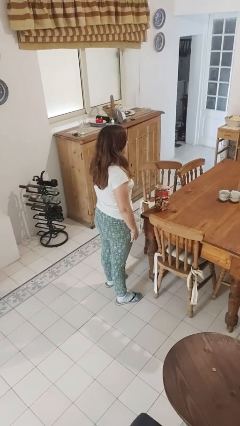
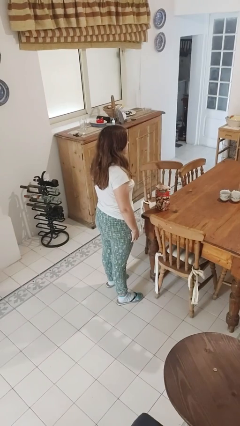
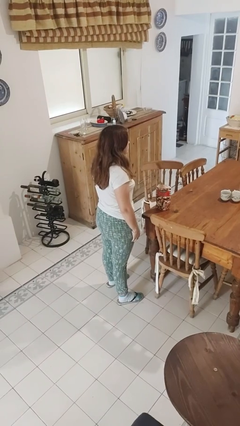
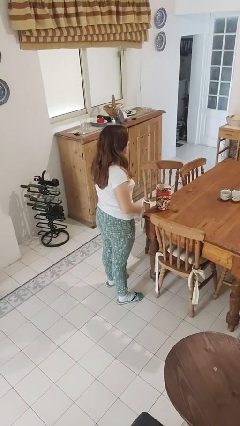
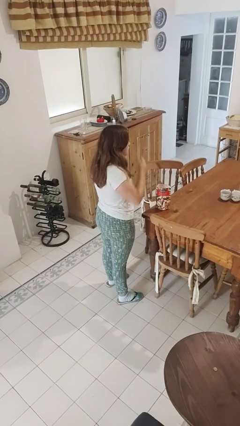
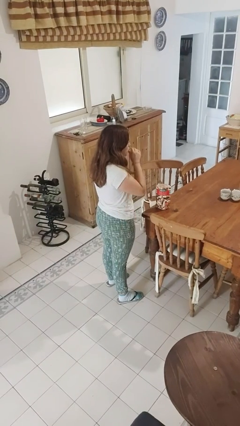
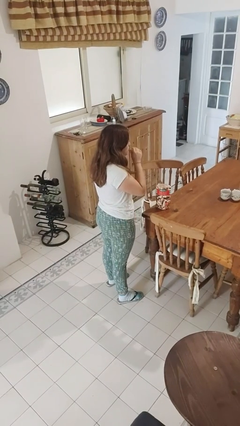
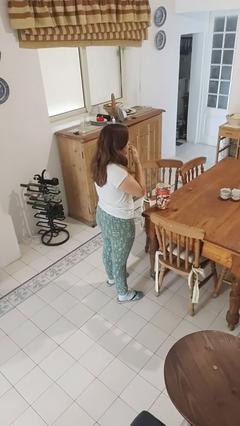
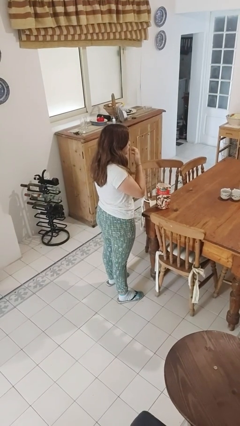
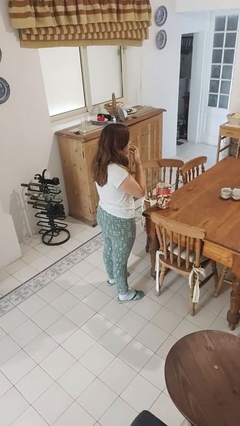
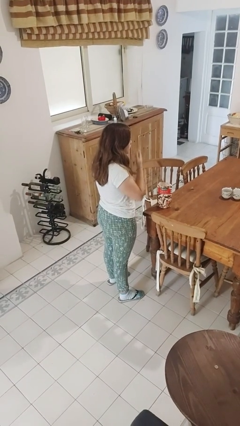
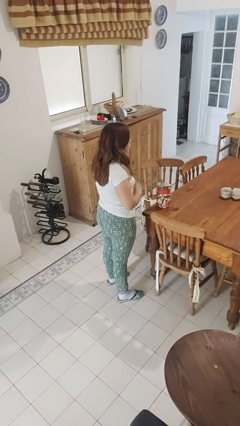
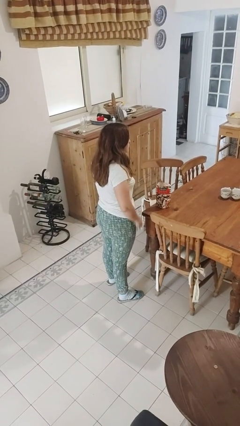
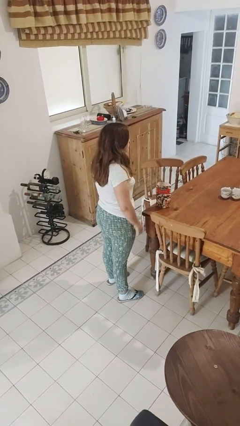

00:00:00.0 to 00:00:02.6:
person licks fingers

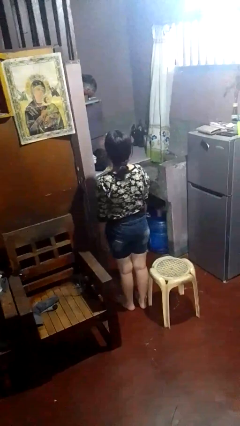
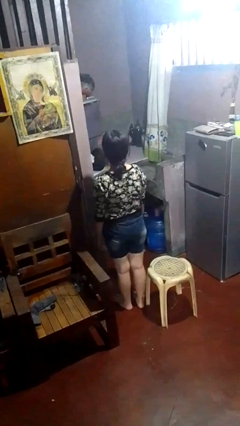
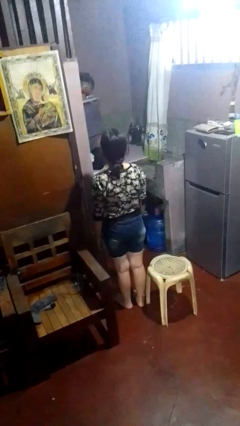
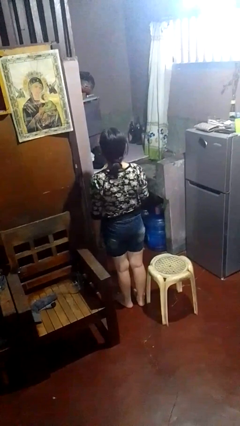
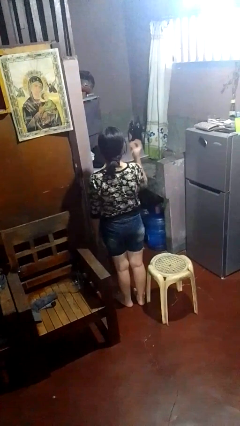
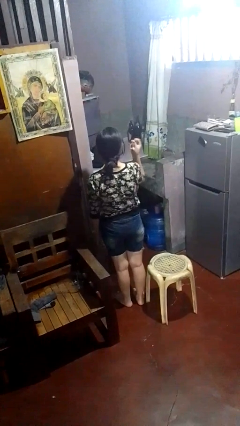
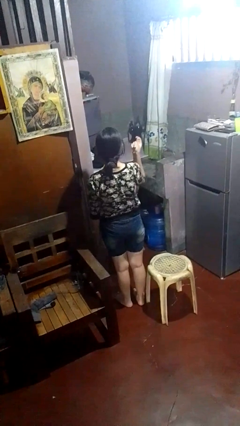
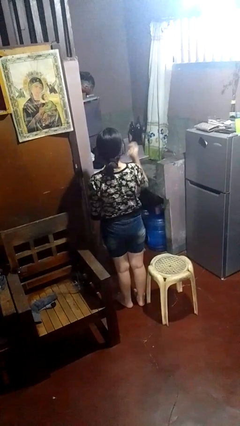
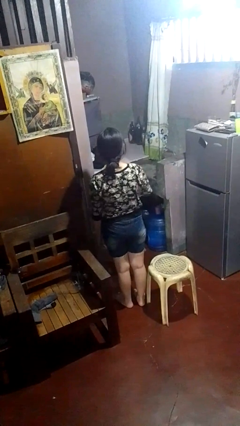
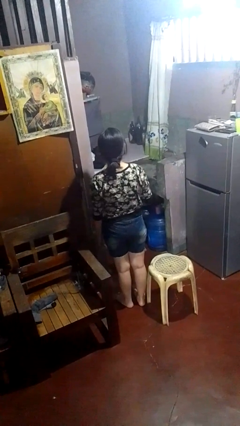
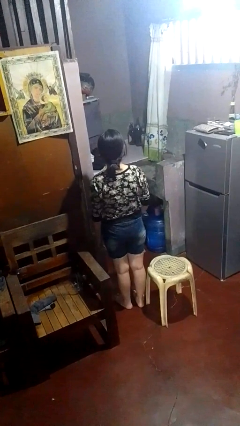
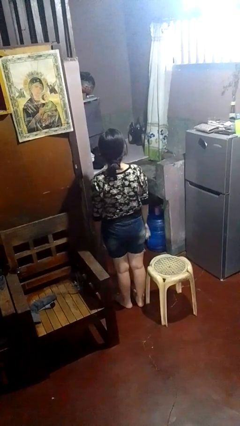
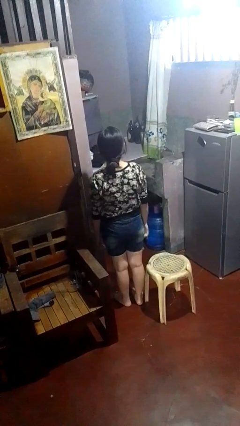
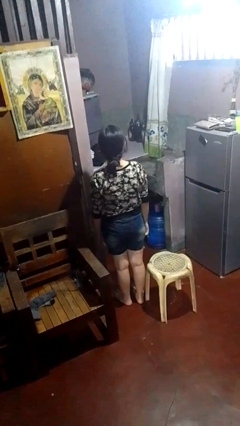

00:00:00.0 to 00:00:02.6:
person snaps fingers

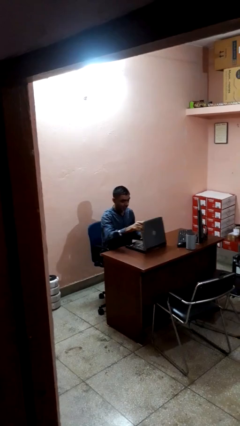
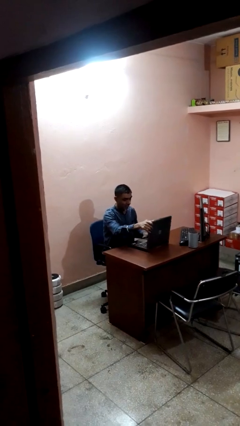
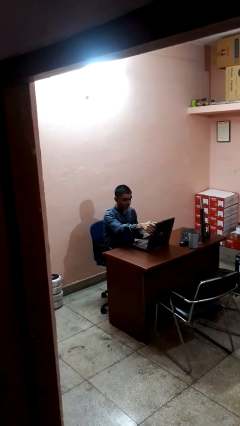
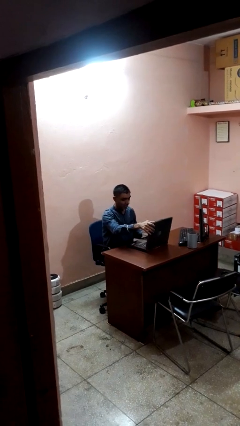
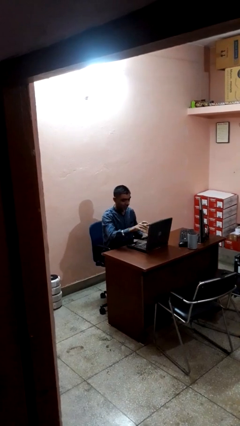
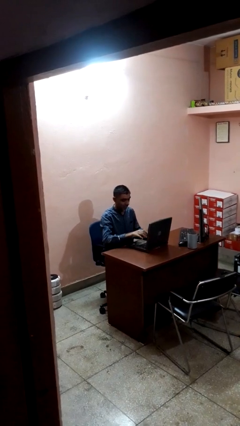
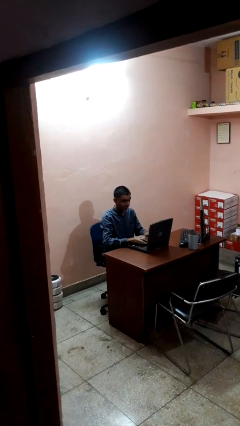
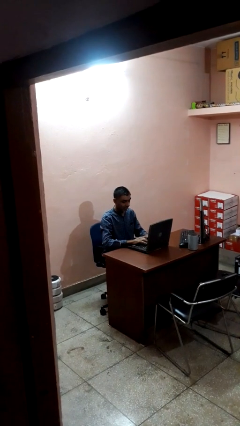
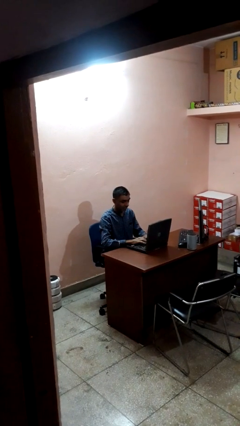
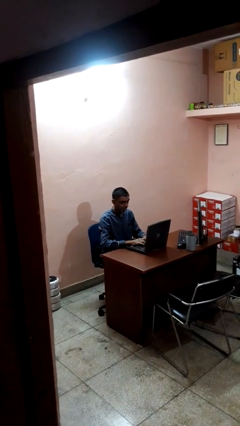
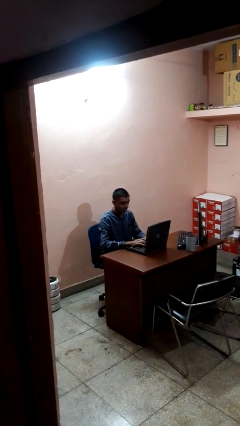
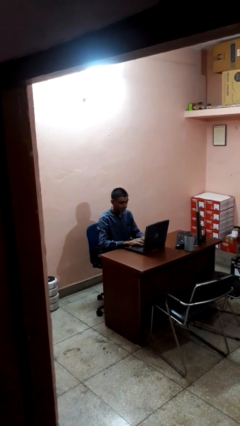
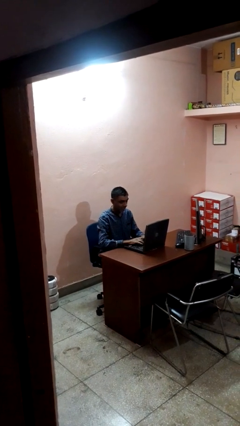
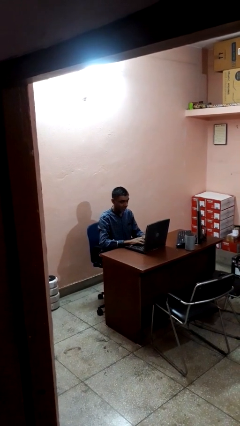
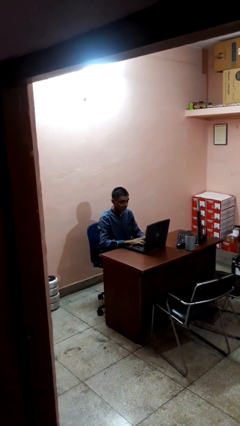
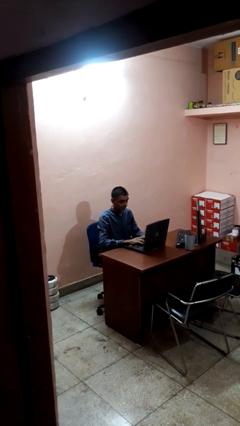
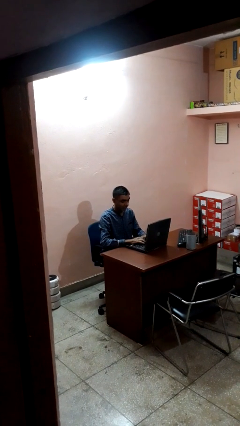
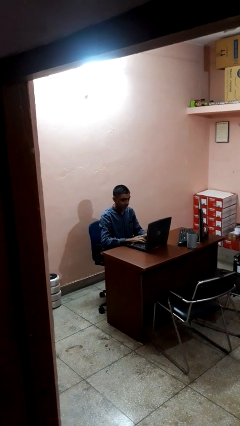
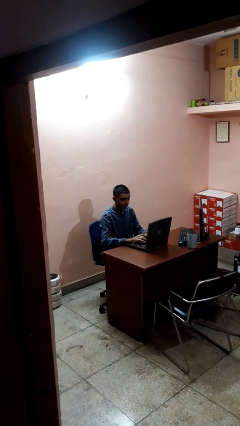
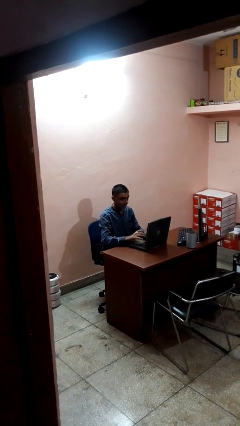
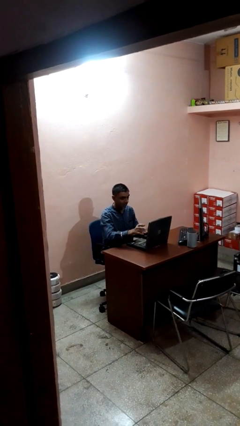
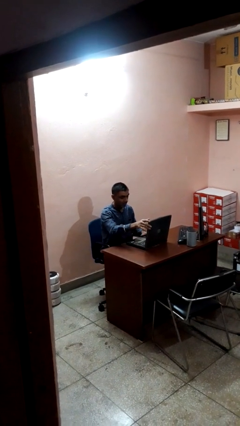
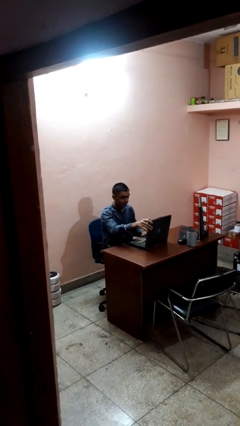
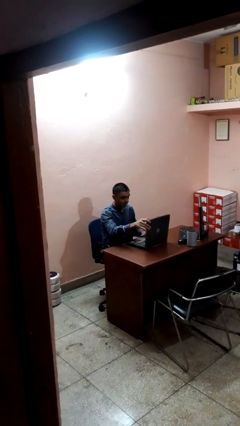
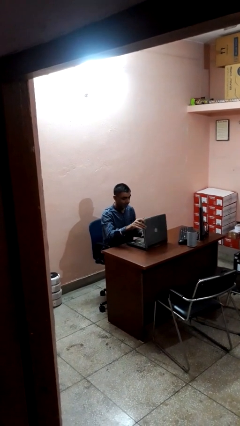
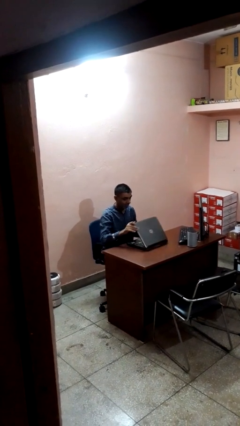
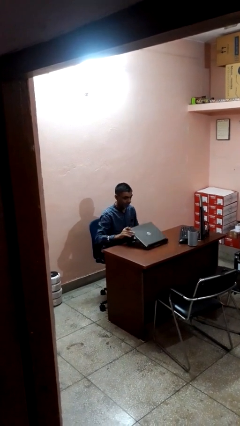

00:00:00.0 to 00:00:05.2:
person interacts with laptop

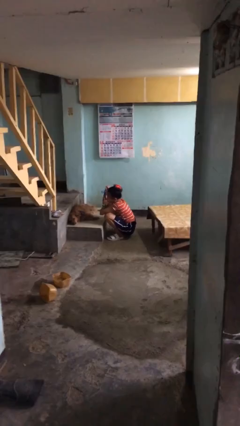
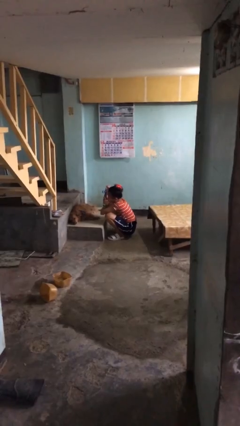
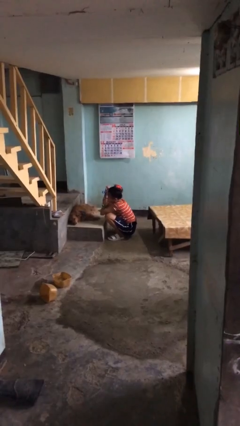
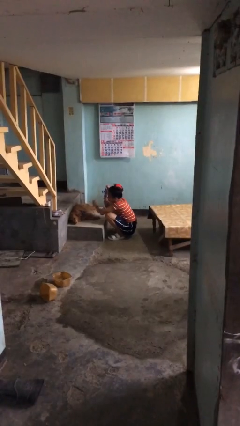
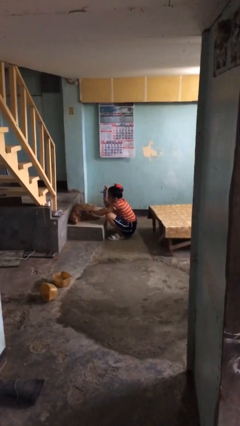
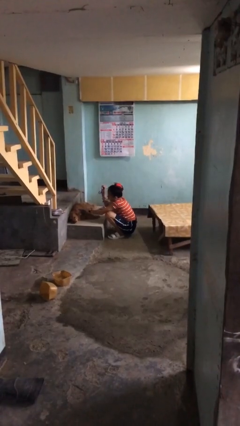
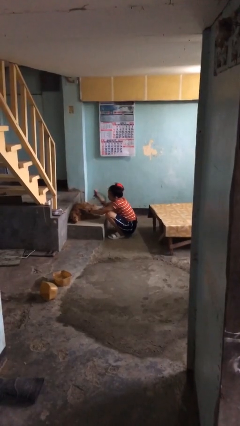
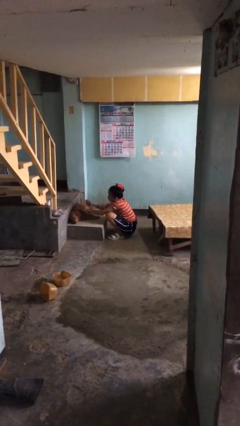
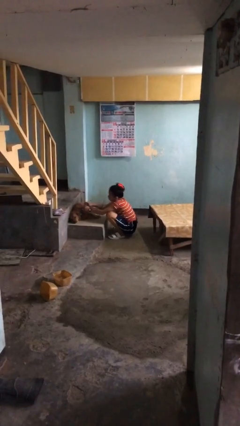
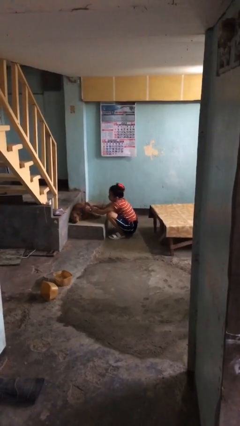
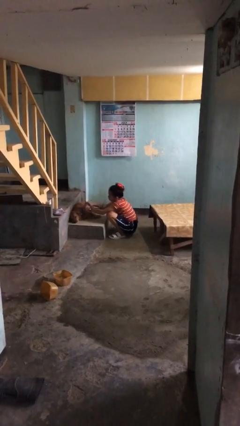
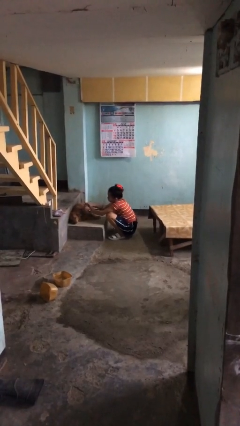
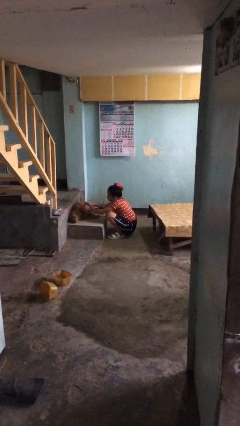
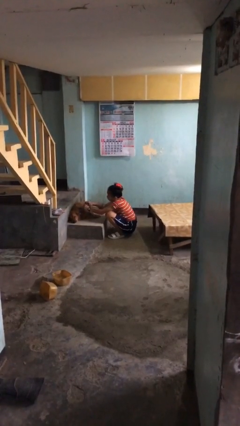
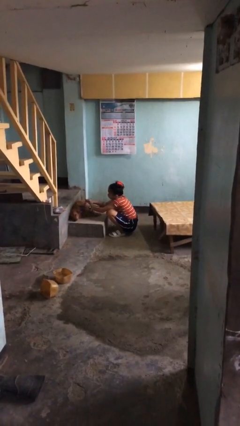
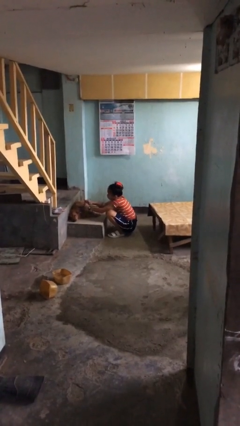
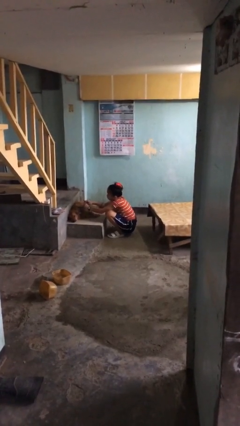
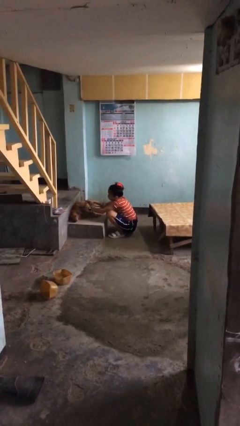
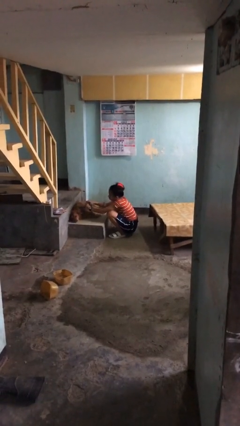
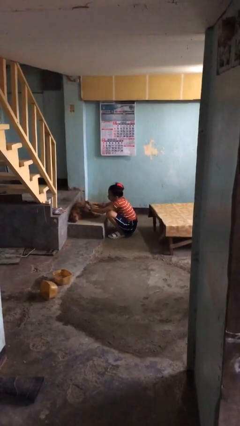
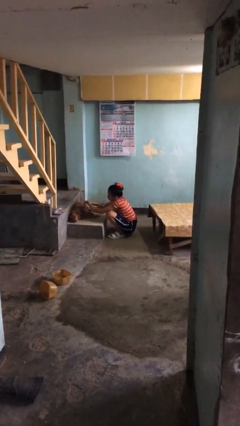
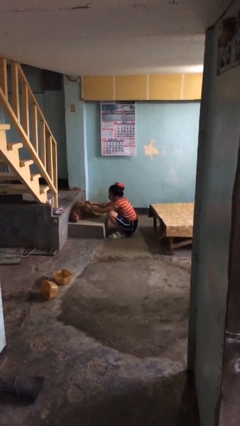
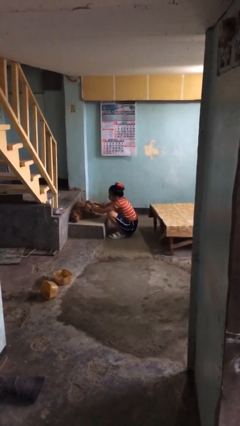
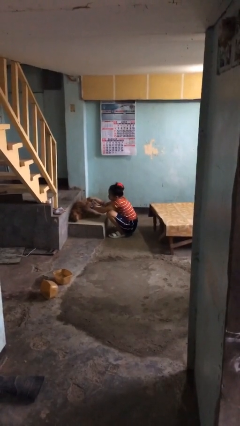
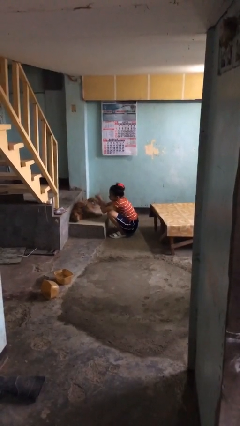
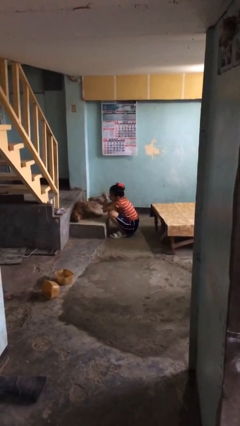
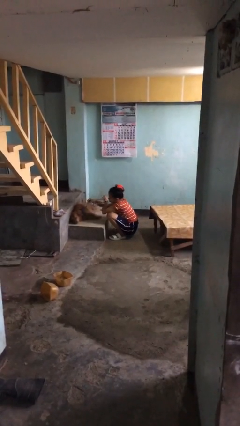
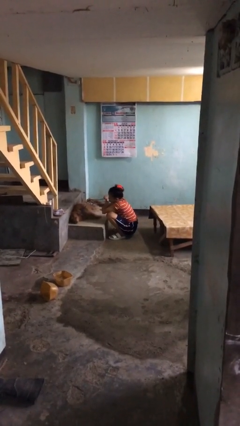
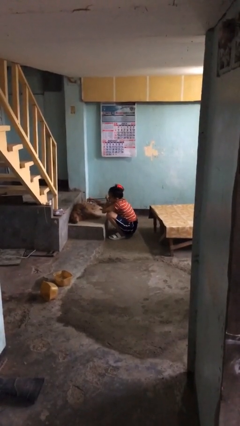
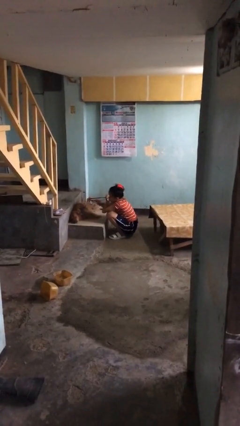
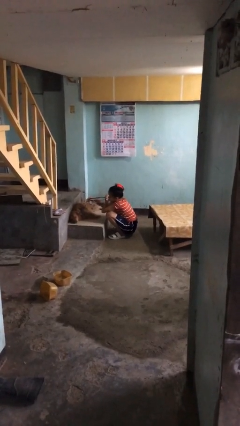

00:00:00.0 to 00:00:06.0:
person attaches leash to dog

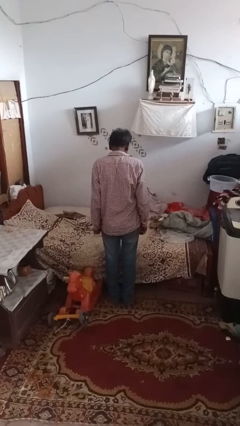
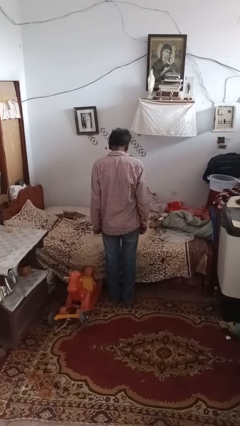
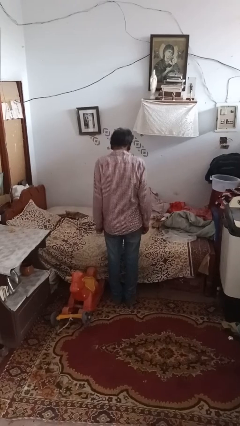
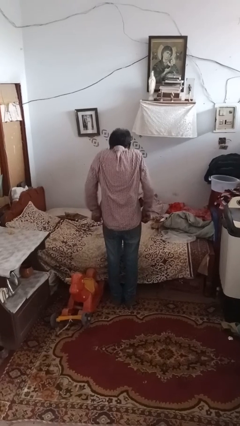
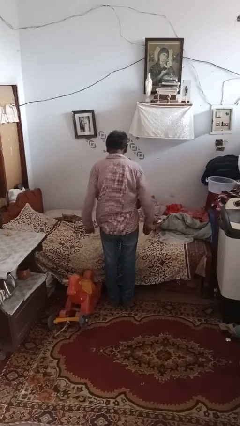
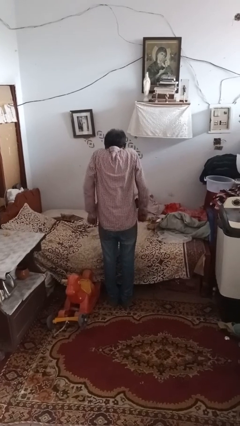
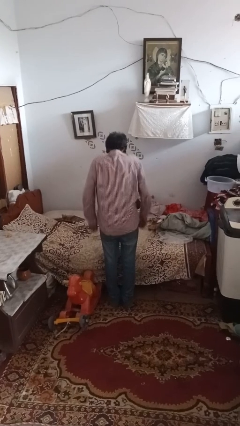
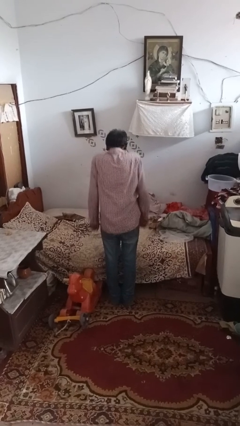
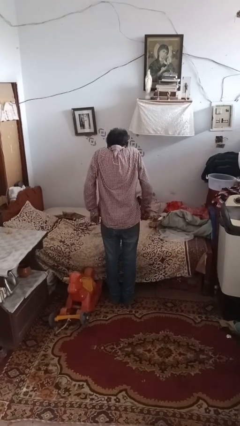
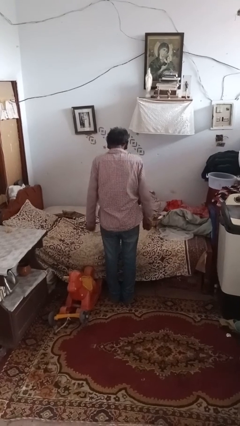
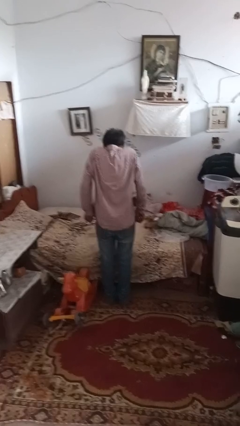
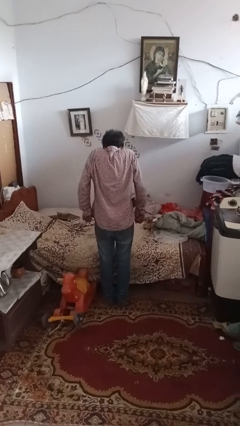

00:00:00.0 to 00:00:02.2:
person shrugs
